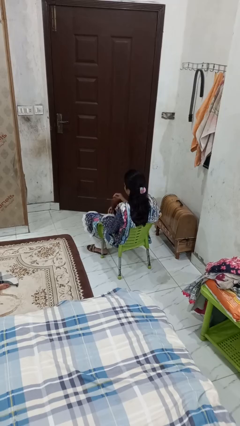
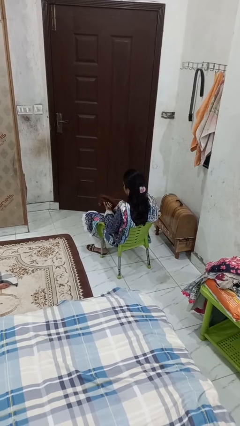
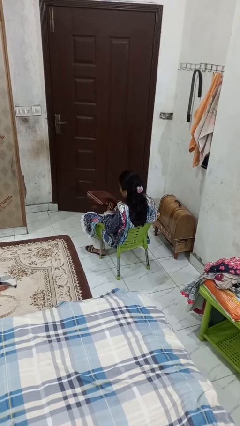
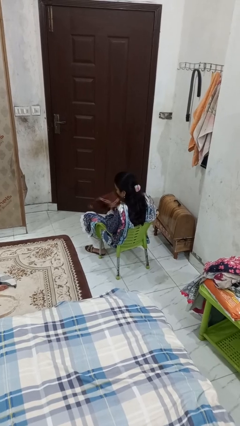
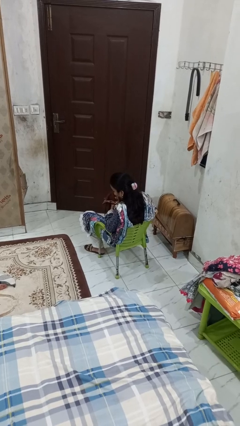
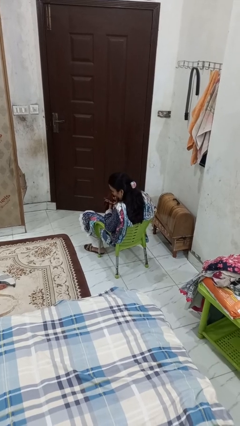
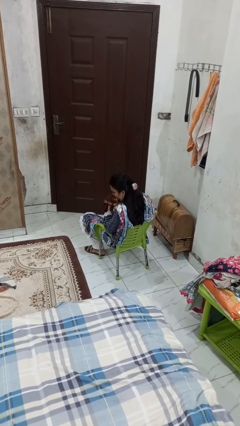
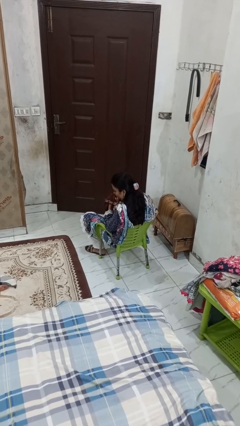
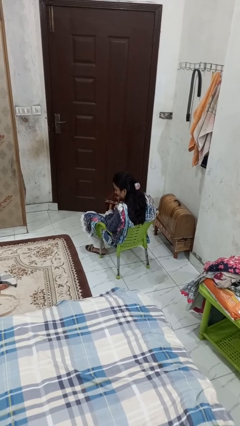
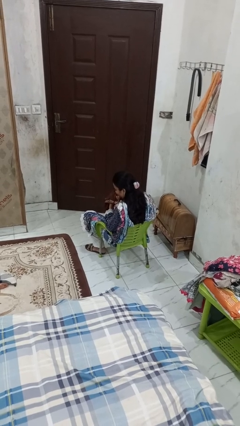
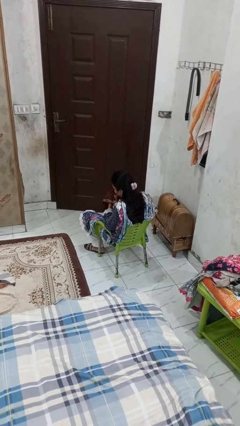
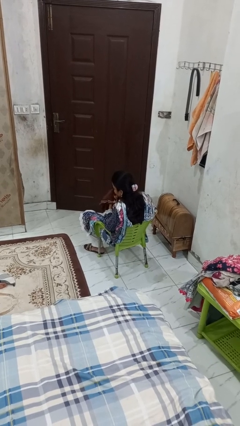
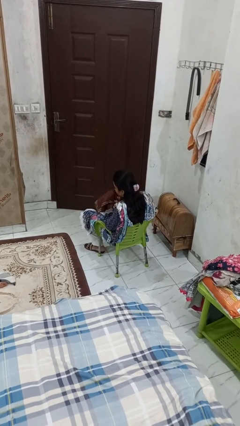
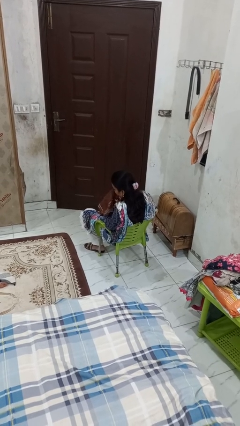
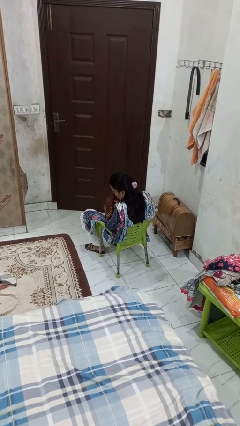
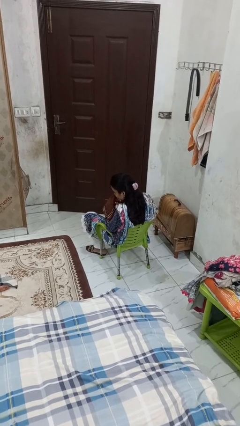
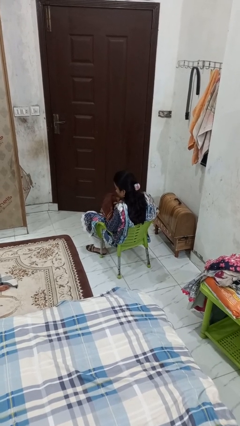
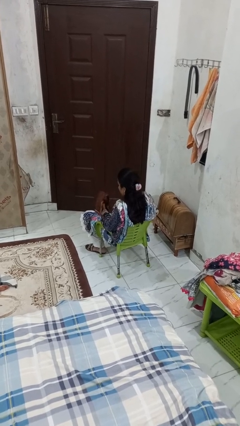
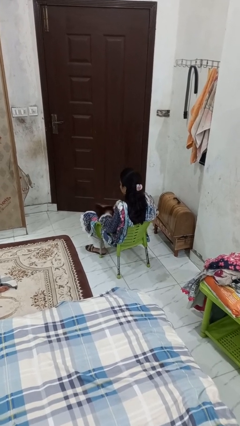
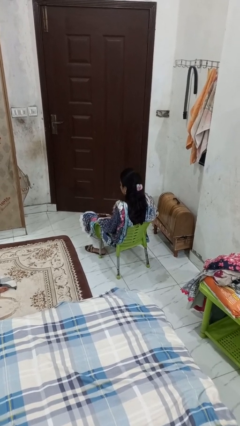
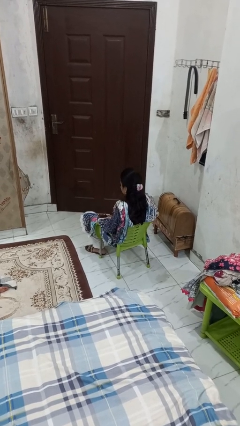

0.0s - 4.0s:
person blows nose

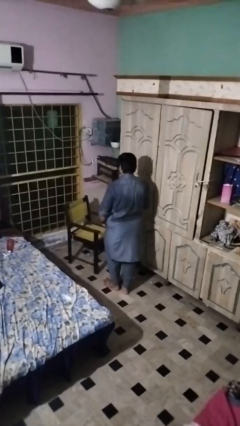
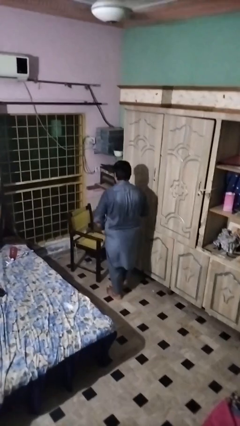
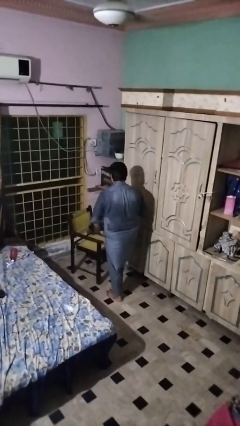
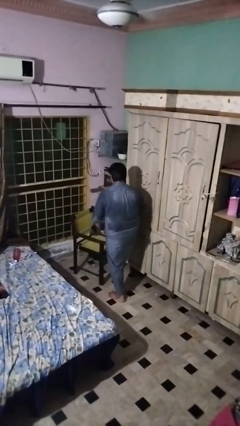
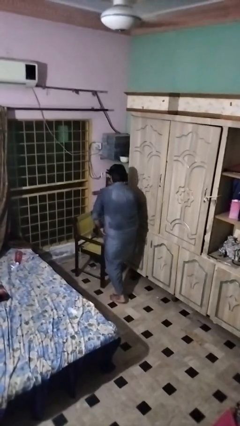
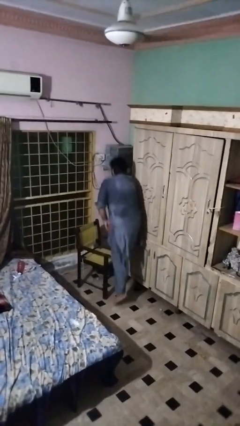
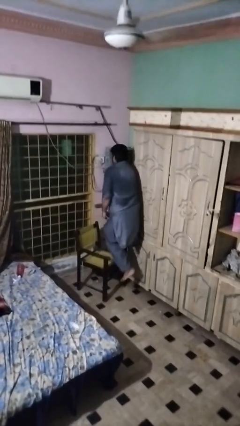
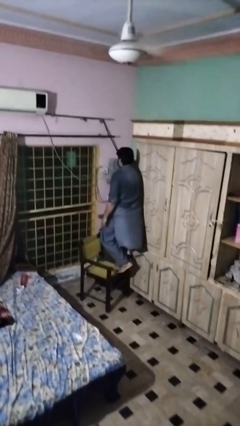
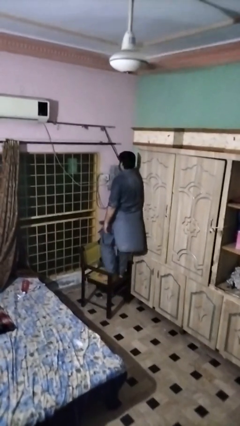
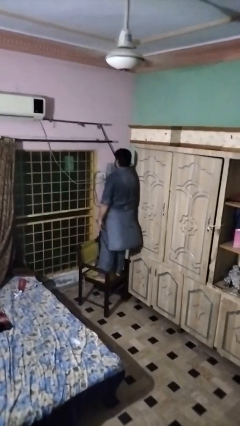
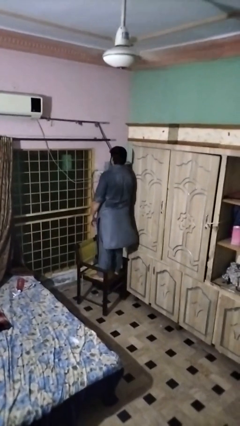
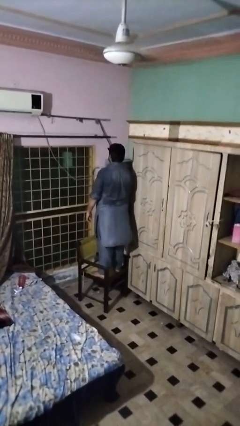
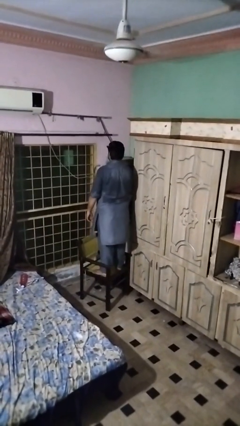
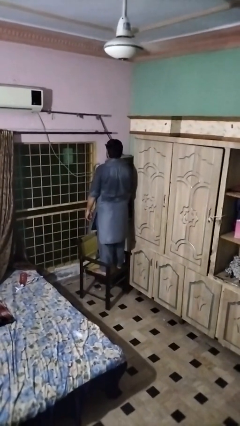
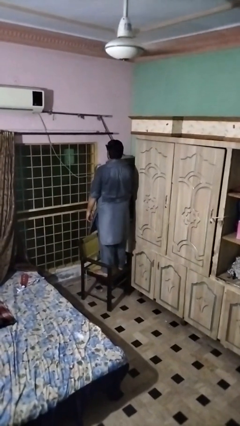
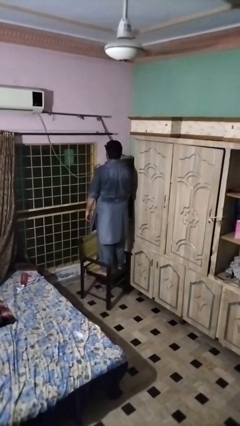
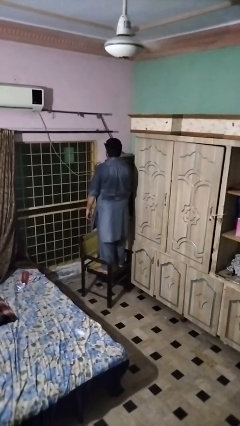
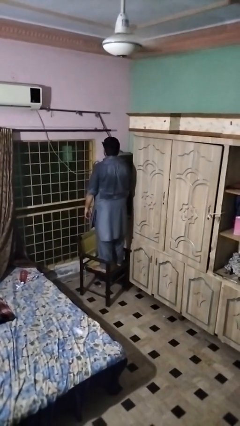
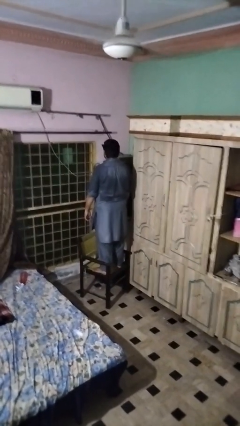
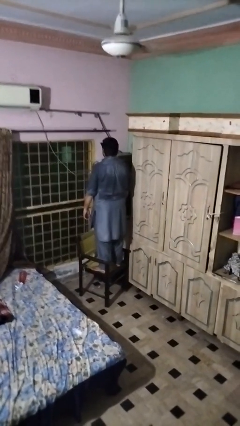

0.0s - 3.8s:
person climbs on chair

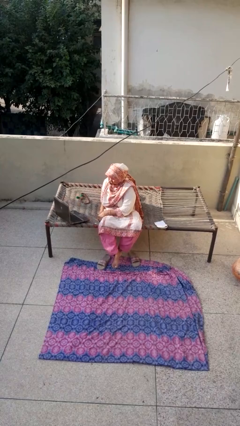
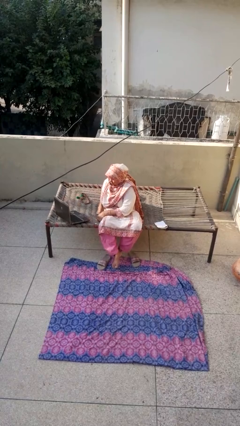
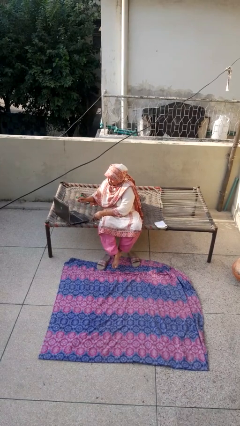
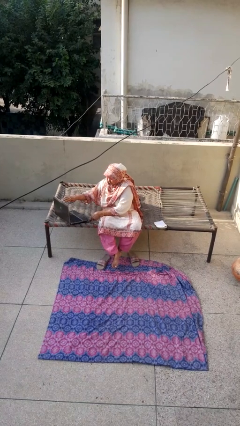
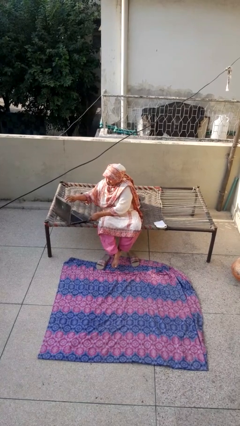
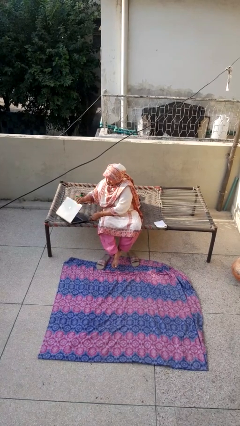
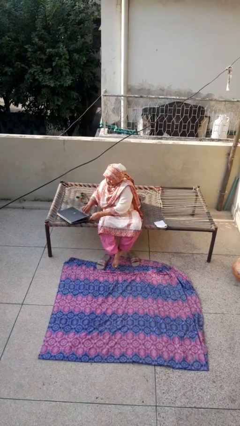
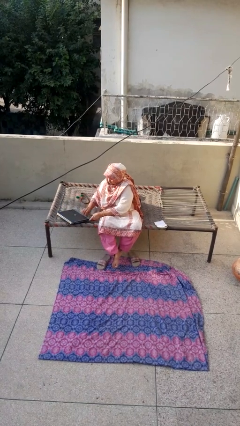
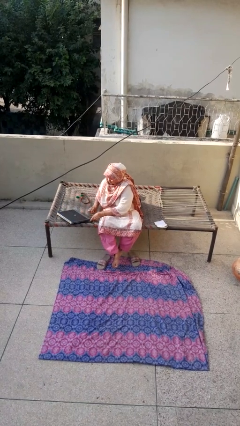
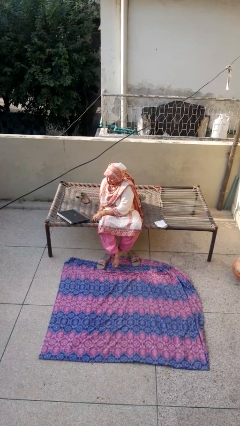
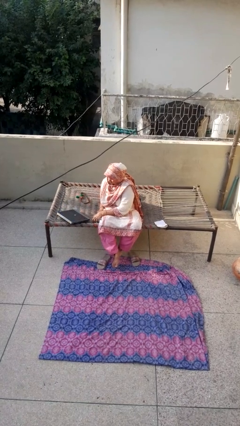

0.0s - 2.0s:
person closes laptop

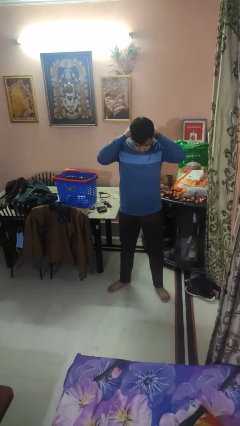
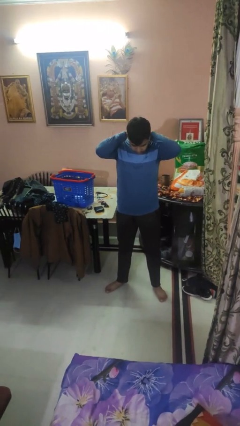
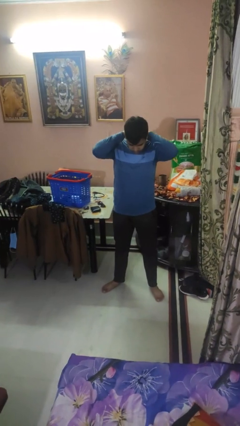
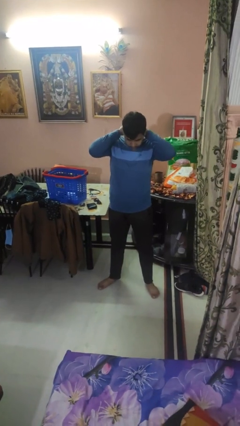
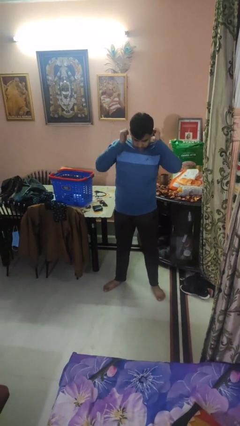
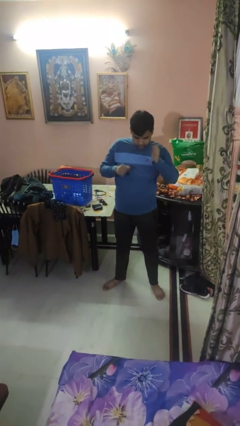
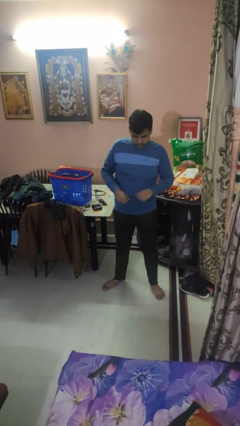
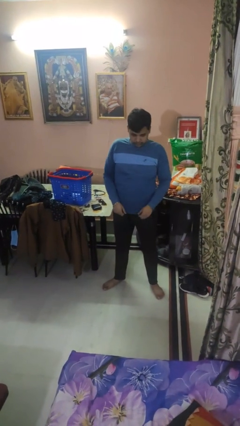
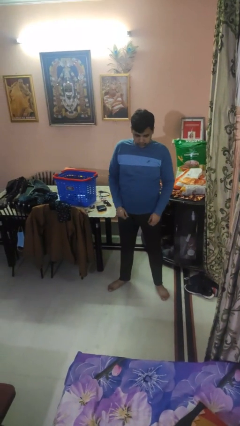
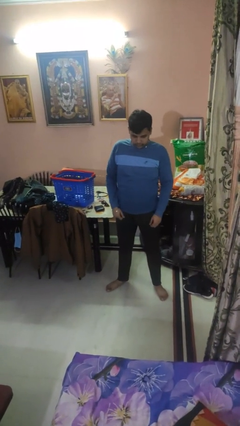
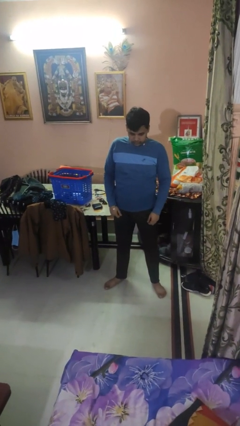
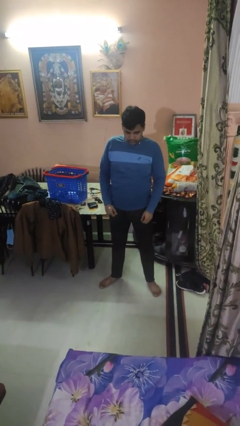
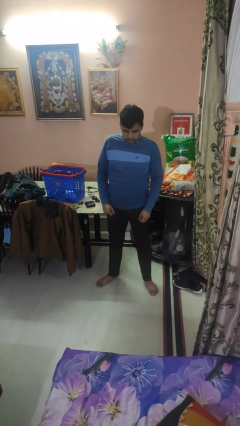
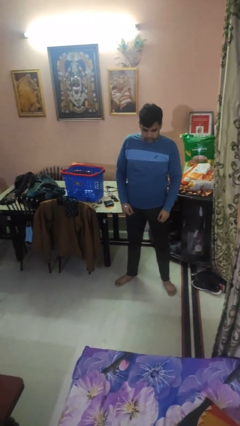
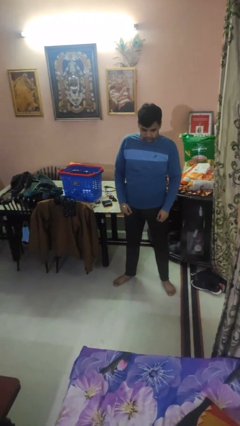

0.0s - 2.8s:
person puts on necklace

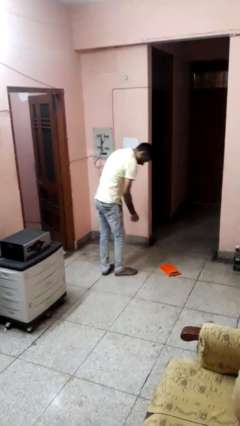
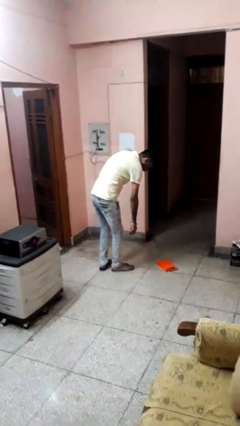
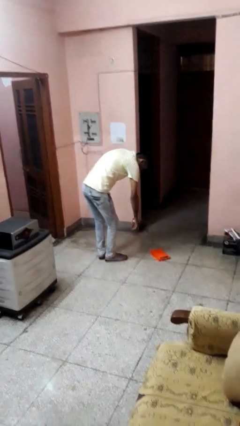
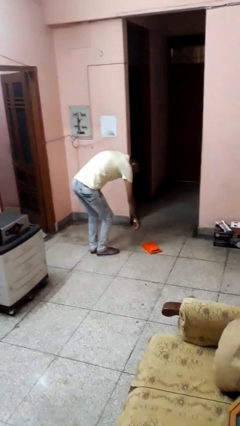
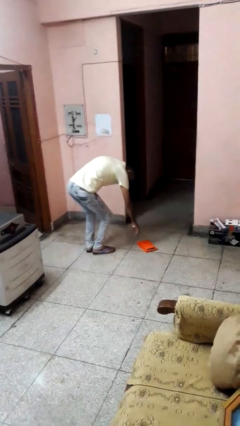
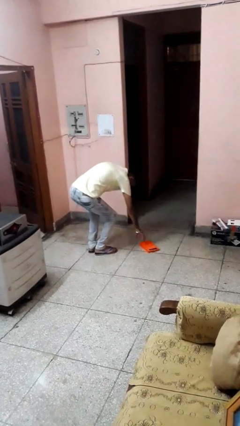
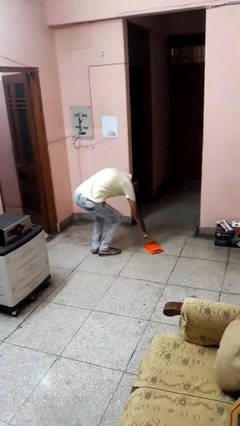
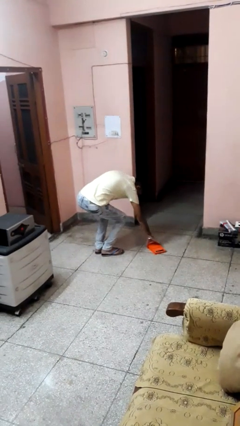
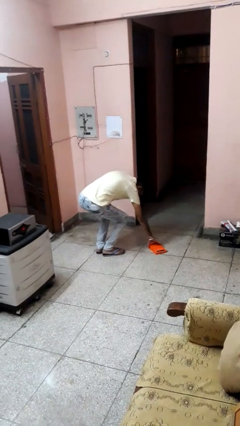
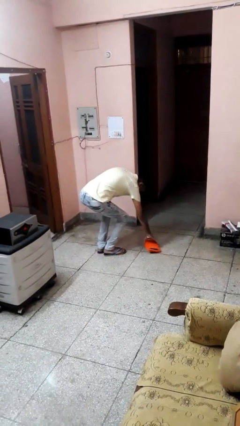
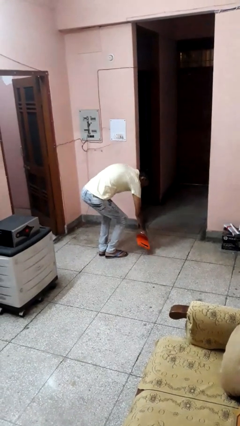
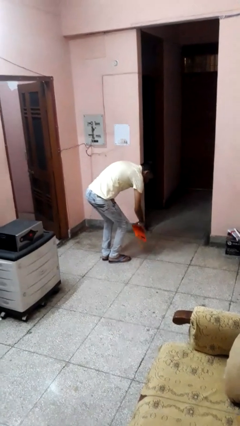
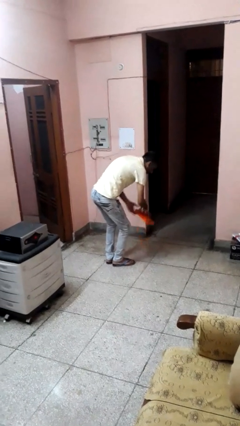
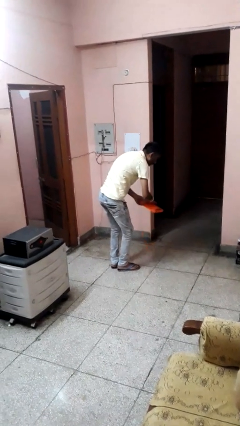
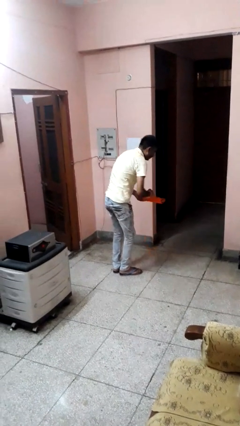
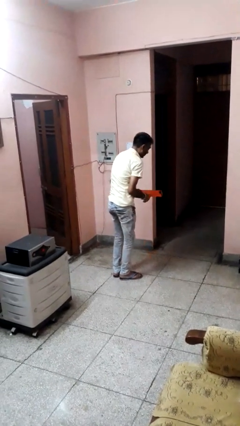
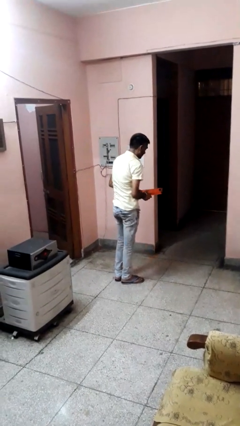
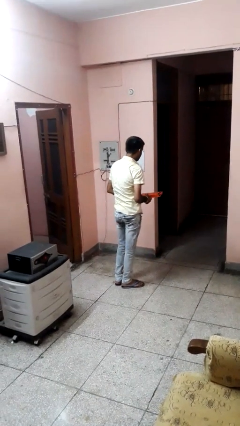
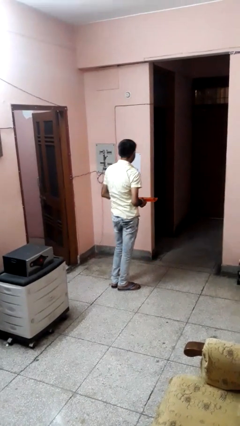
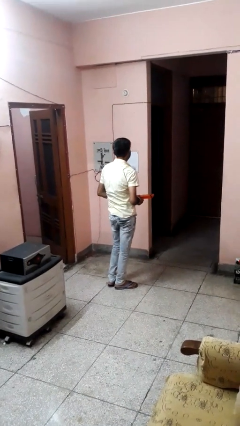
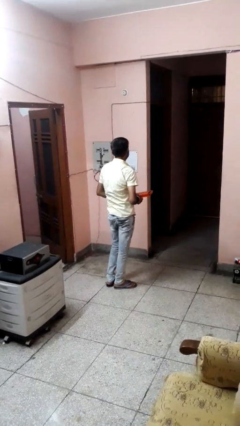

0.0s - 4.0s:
person picks up object from floor

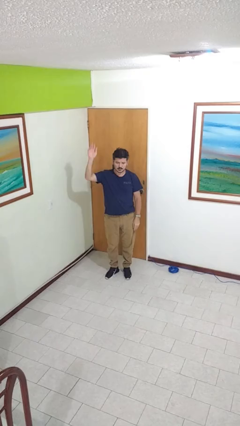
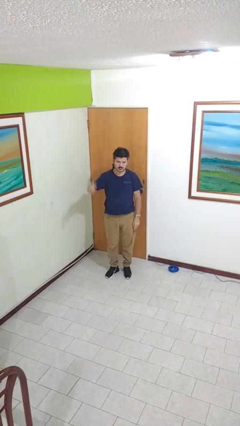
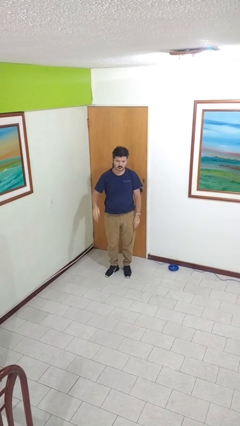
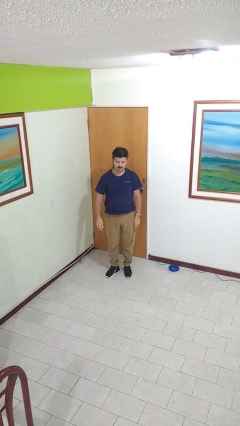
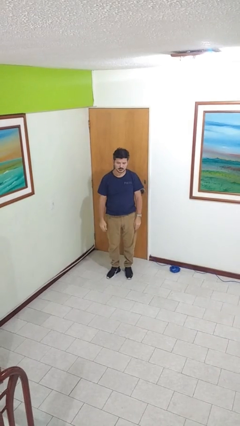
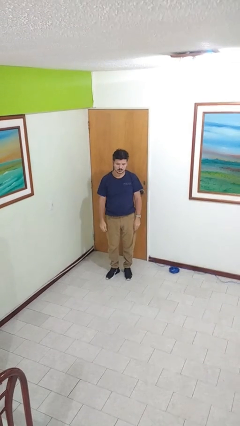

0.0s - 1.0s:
person gestures lower hand
